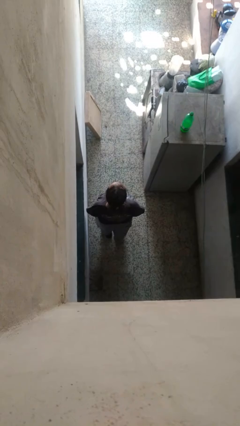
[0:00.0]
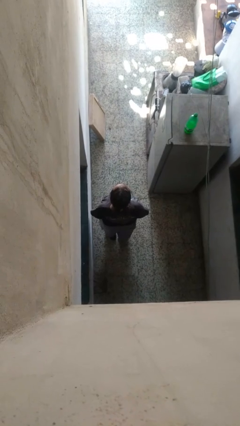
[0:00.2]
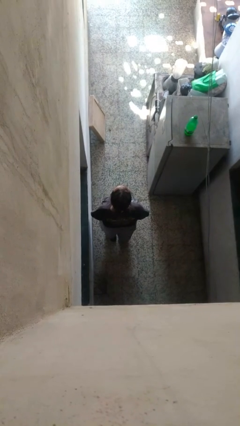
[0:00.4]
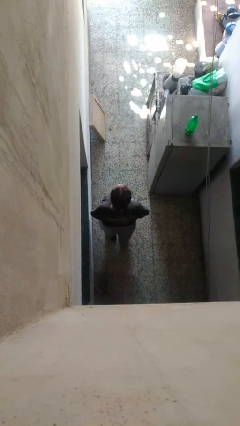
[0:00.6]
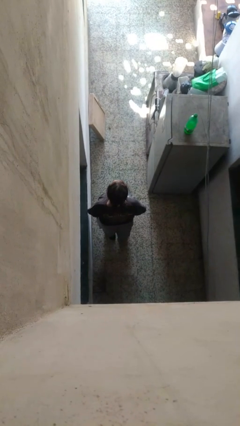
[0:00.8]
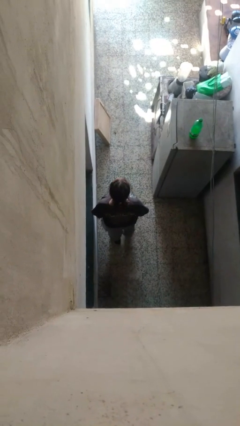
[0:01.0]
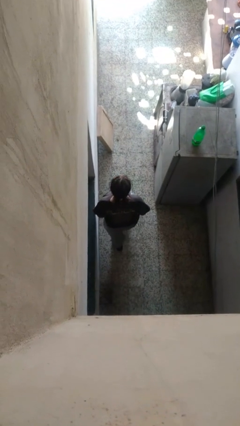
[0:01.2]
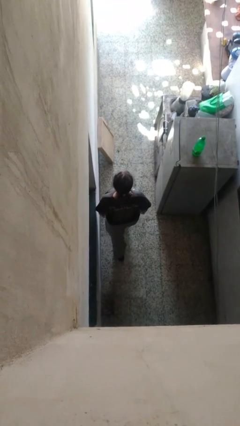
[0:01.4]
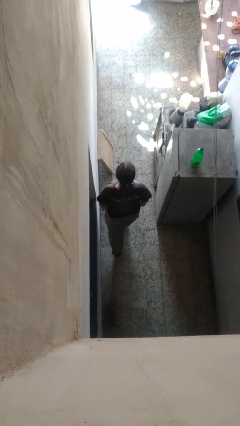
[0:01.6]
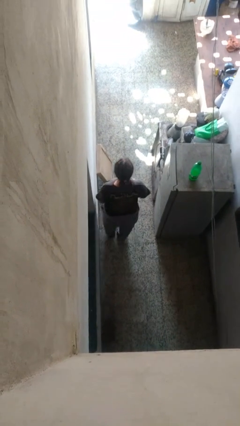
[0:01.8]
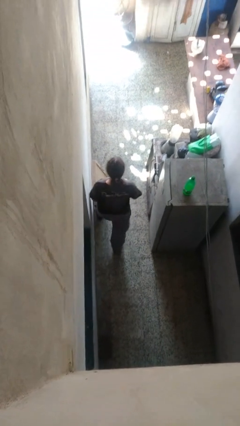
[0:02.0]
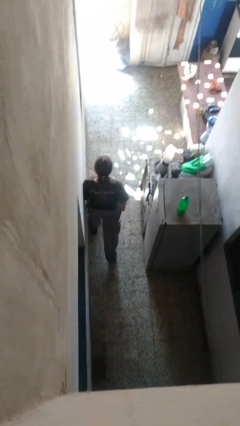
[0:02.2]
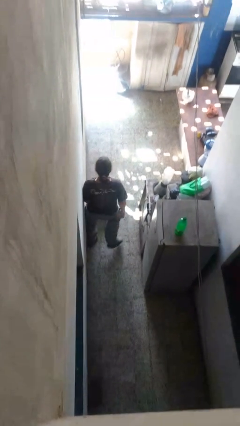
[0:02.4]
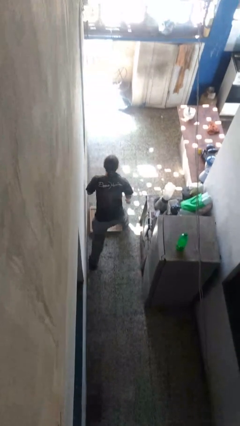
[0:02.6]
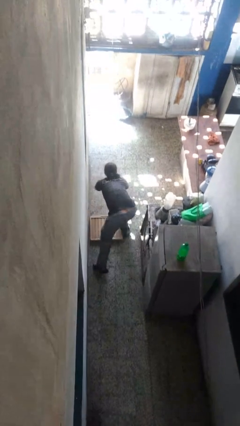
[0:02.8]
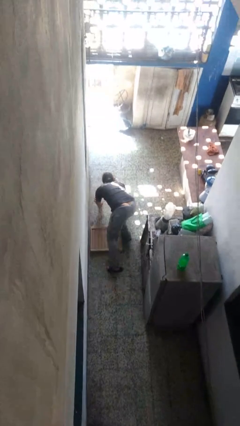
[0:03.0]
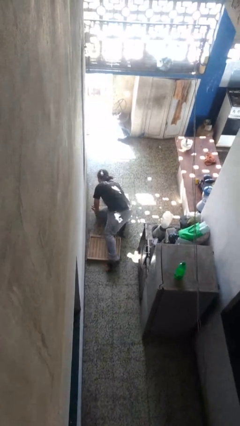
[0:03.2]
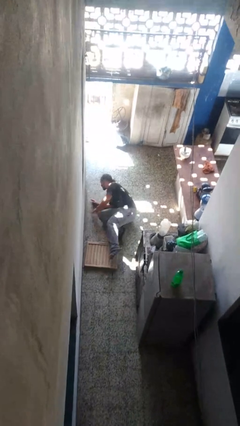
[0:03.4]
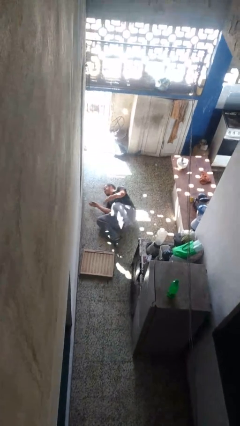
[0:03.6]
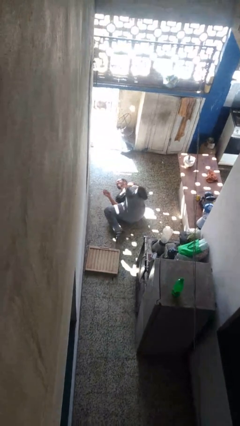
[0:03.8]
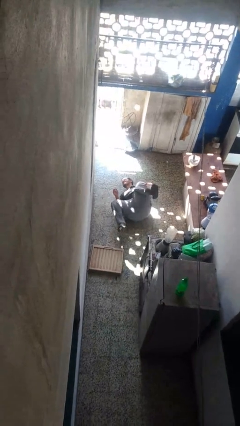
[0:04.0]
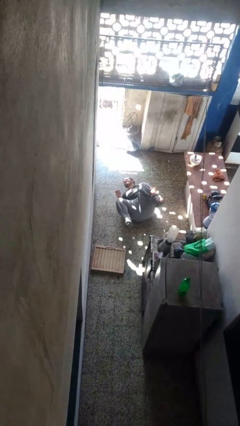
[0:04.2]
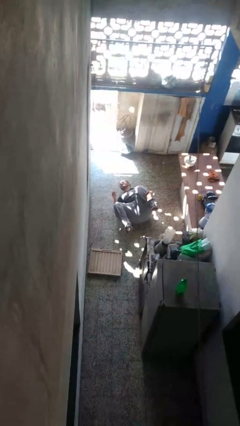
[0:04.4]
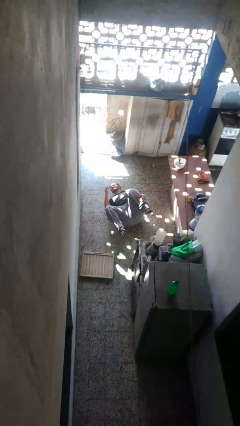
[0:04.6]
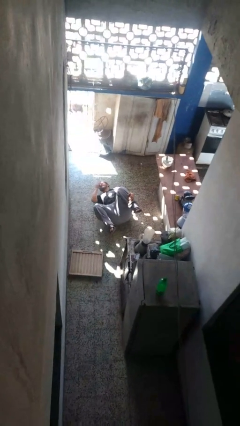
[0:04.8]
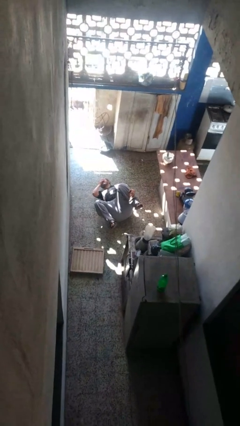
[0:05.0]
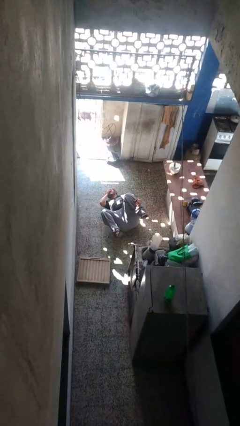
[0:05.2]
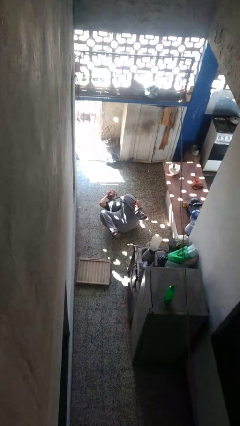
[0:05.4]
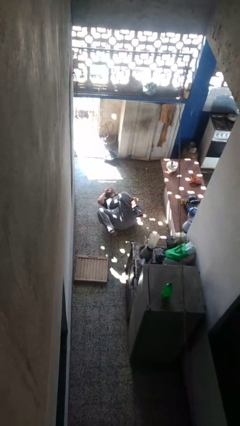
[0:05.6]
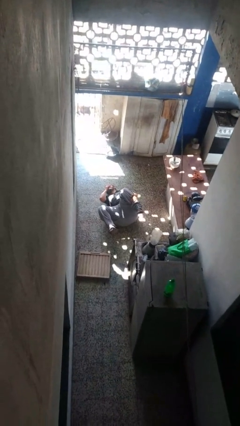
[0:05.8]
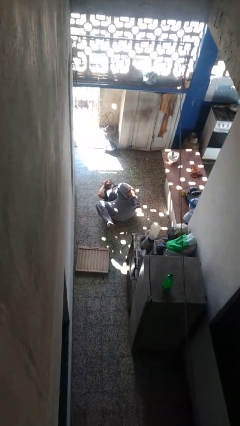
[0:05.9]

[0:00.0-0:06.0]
person trips on object on floor

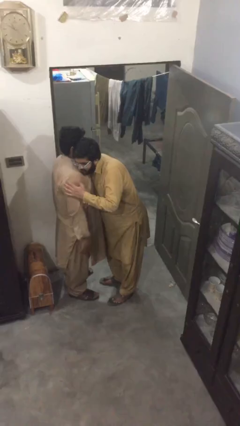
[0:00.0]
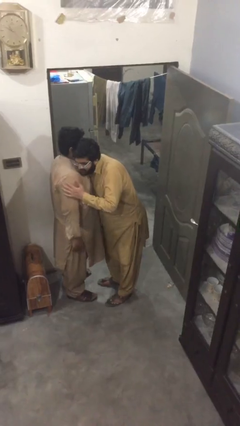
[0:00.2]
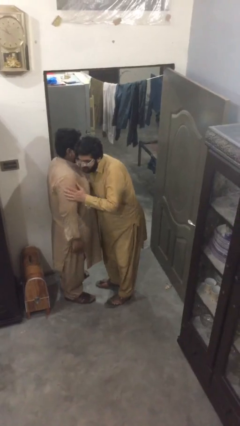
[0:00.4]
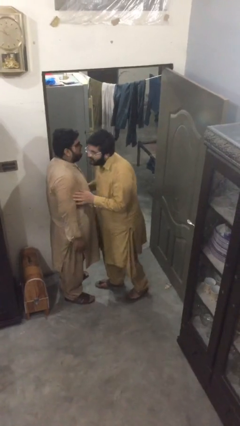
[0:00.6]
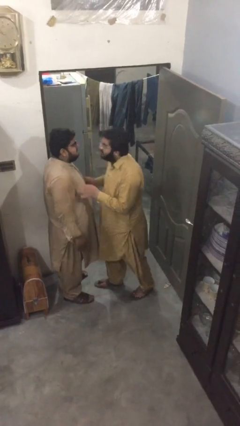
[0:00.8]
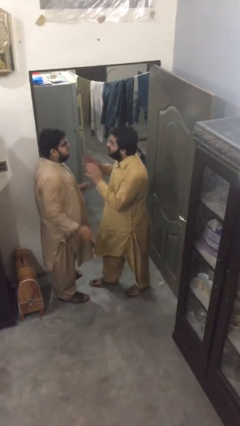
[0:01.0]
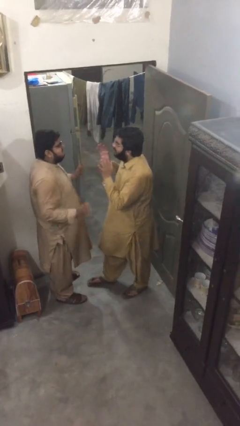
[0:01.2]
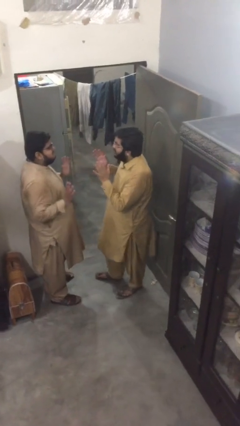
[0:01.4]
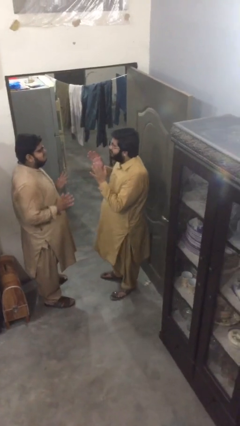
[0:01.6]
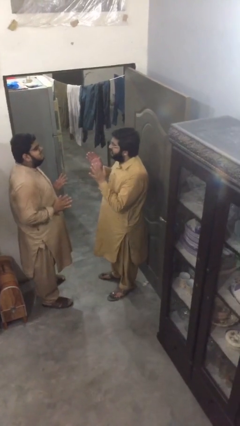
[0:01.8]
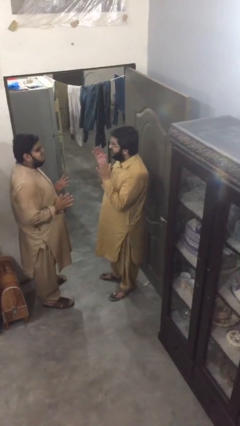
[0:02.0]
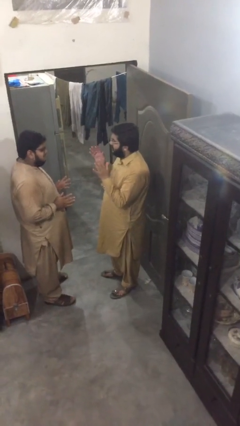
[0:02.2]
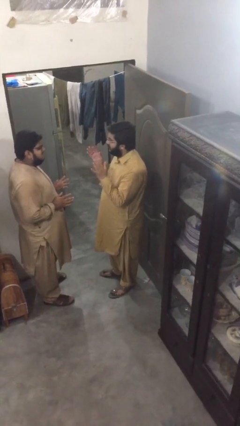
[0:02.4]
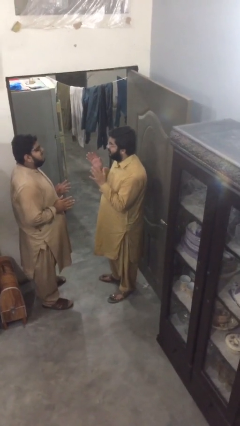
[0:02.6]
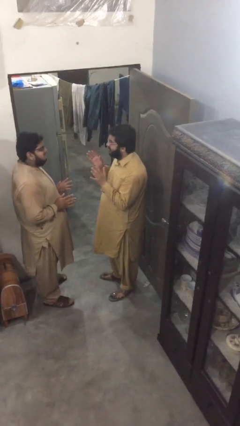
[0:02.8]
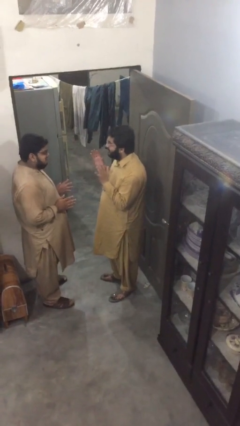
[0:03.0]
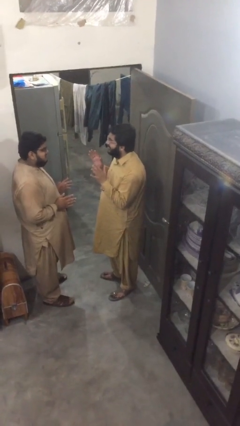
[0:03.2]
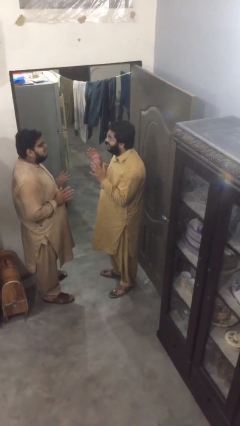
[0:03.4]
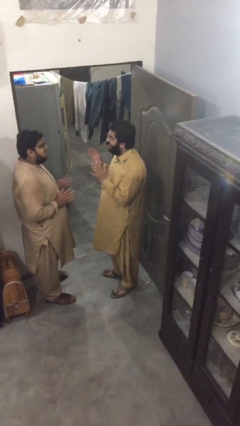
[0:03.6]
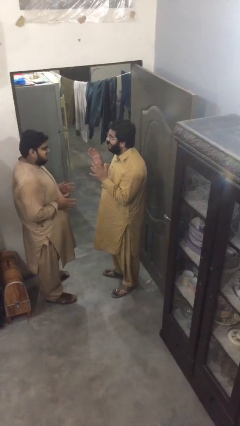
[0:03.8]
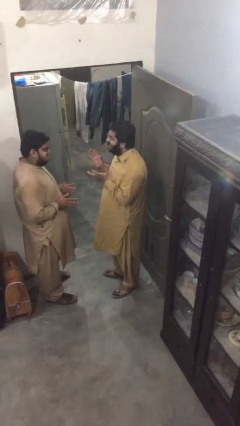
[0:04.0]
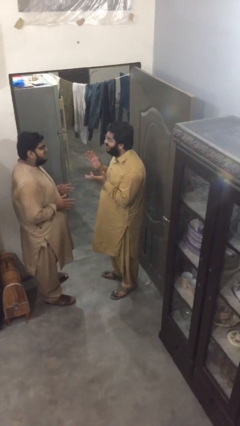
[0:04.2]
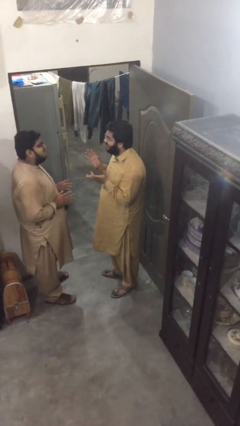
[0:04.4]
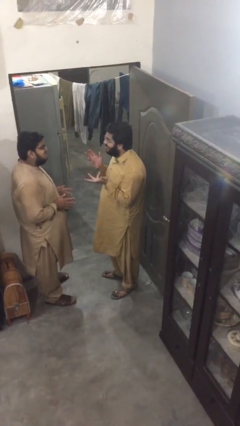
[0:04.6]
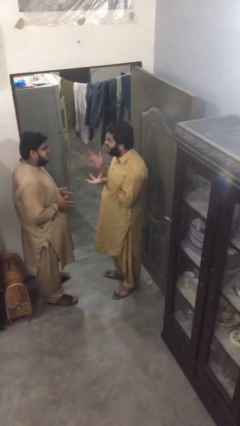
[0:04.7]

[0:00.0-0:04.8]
person talks to person

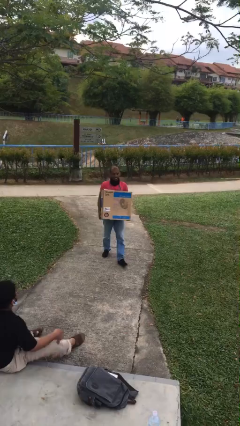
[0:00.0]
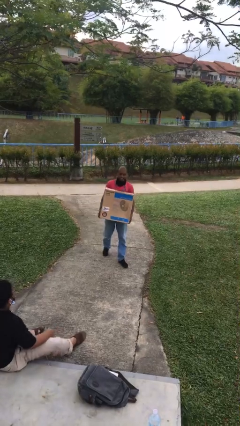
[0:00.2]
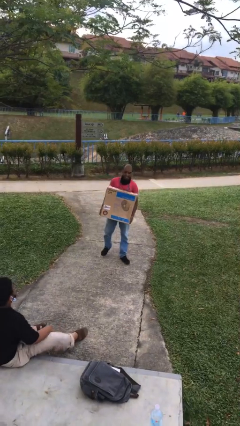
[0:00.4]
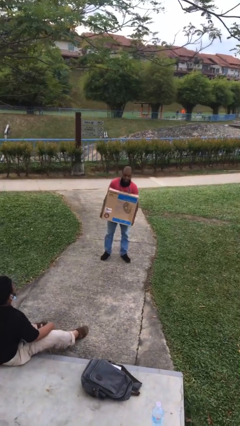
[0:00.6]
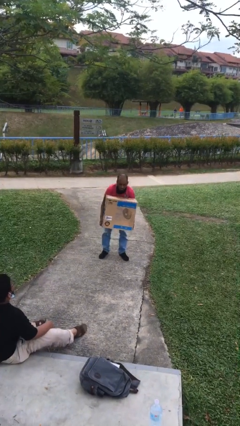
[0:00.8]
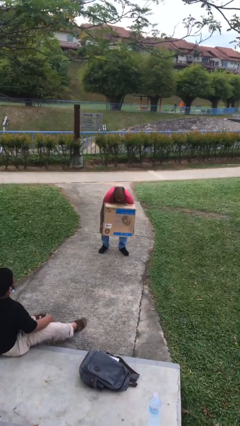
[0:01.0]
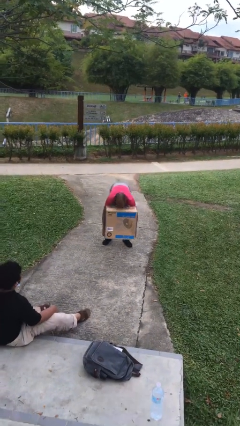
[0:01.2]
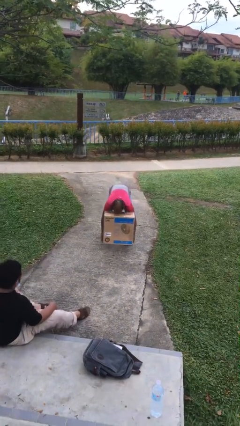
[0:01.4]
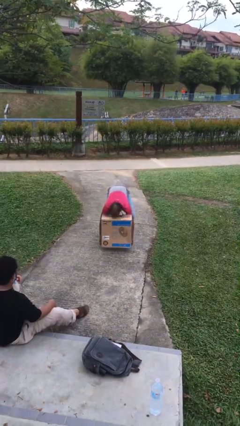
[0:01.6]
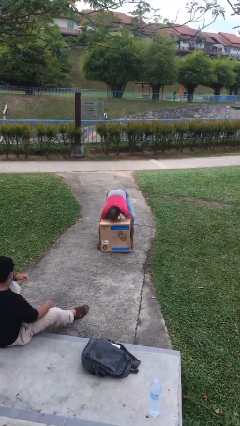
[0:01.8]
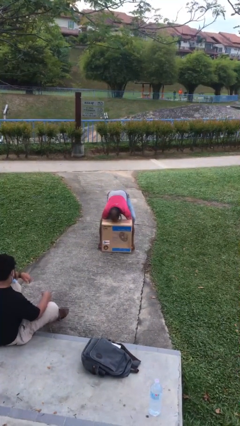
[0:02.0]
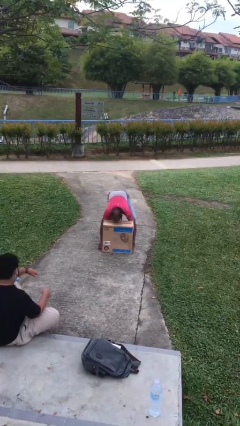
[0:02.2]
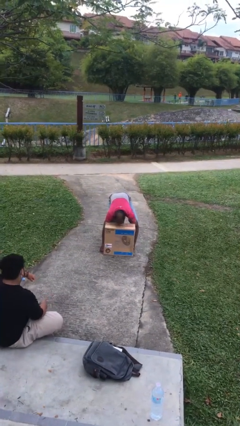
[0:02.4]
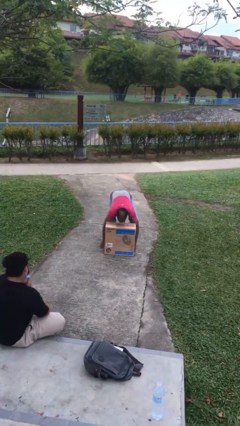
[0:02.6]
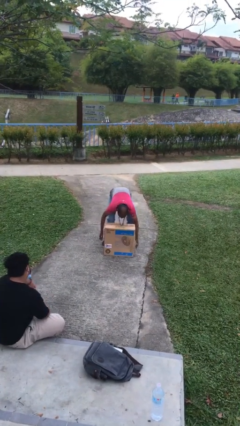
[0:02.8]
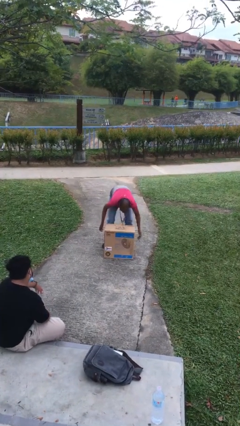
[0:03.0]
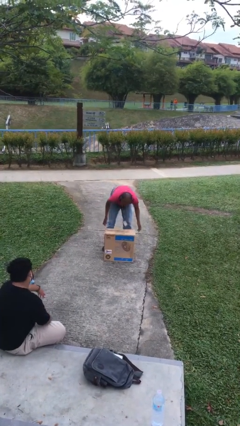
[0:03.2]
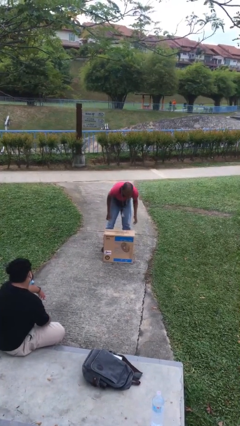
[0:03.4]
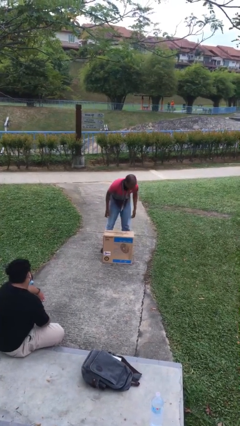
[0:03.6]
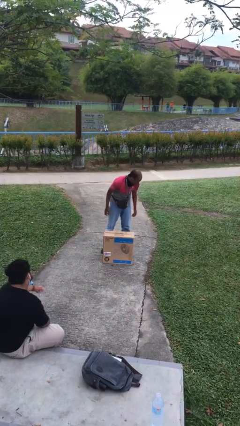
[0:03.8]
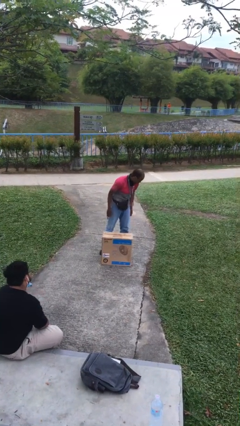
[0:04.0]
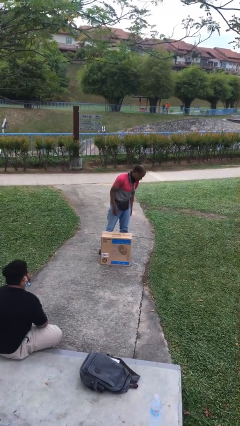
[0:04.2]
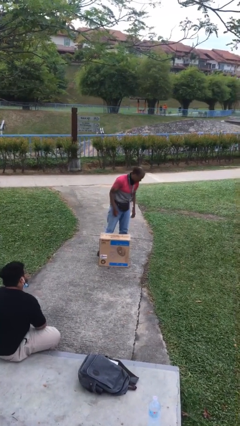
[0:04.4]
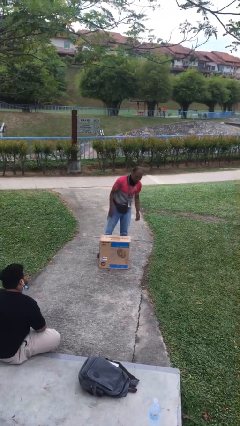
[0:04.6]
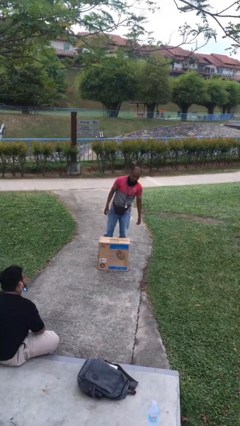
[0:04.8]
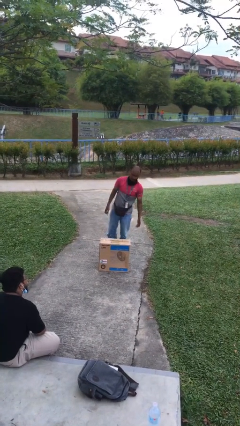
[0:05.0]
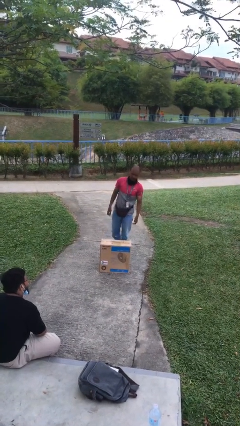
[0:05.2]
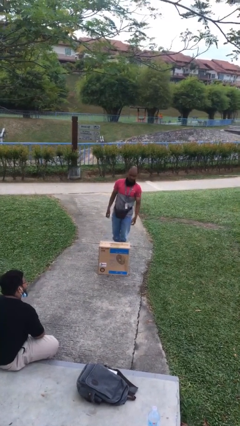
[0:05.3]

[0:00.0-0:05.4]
person puts down object on floor

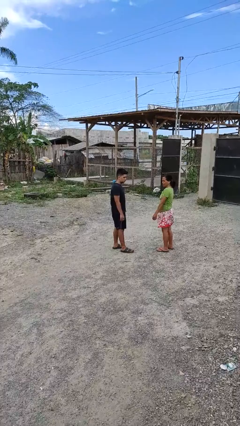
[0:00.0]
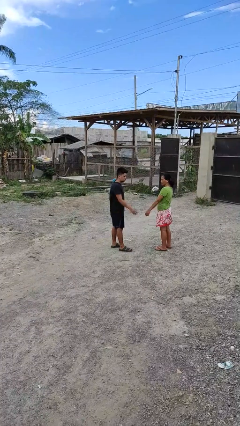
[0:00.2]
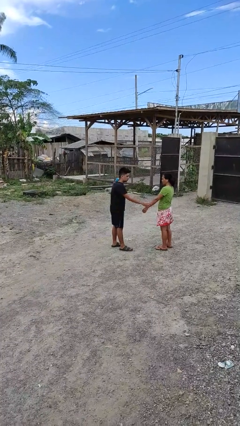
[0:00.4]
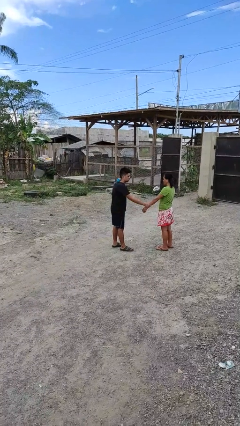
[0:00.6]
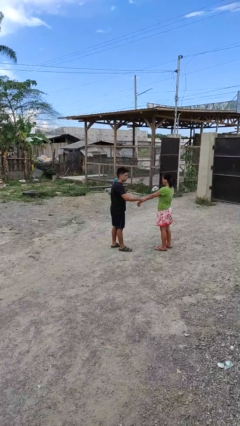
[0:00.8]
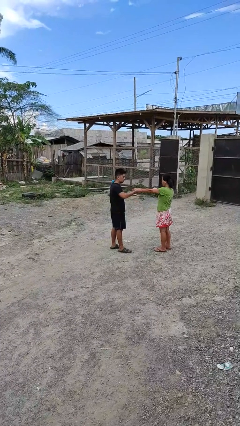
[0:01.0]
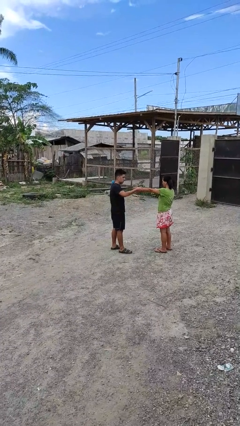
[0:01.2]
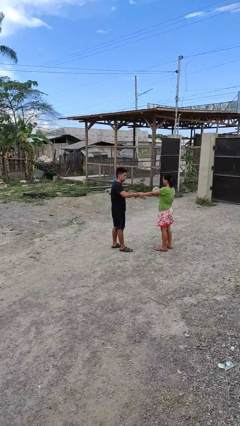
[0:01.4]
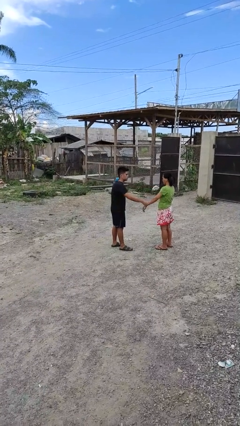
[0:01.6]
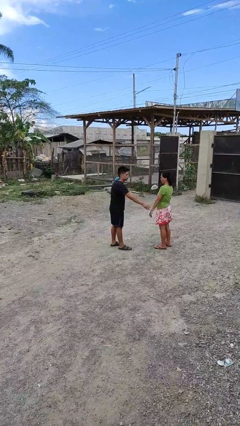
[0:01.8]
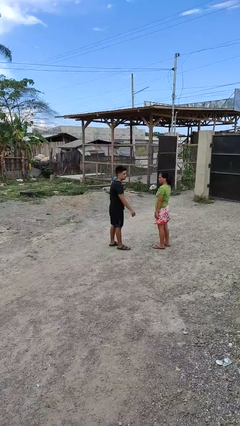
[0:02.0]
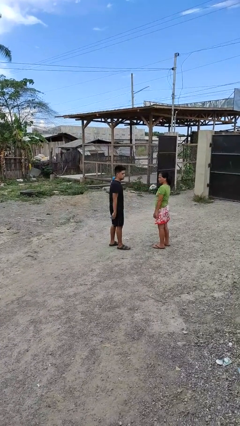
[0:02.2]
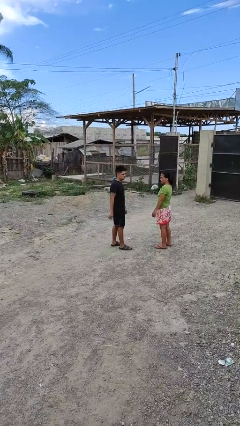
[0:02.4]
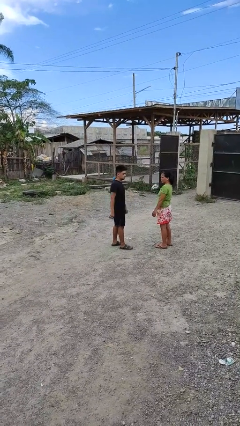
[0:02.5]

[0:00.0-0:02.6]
person grabs person by forearm
